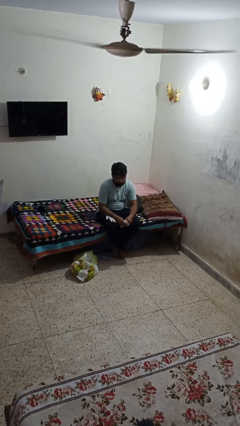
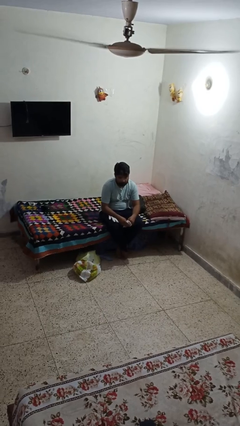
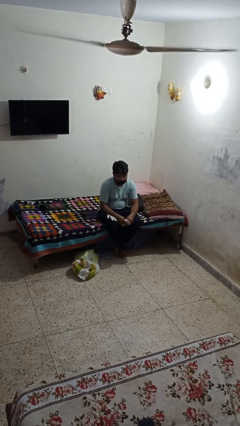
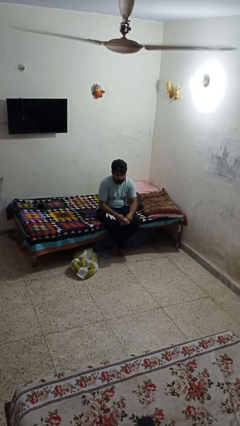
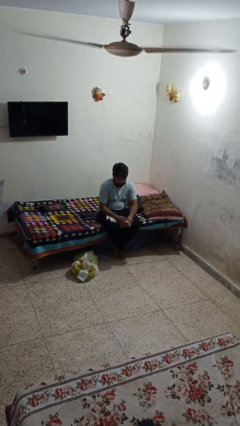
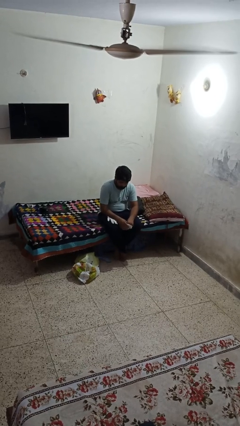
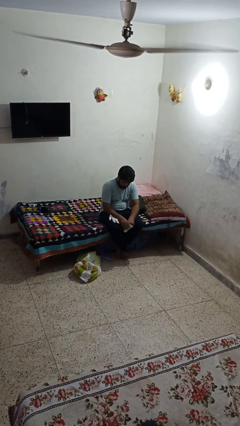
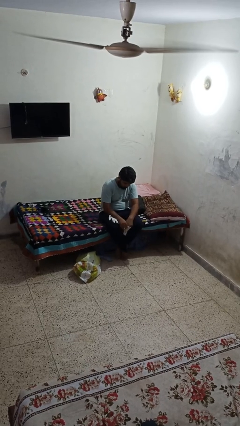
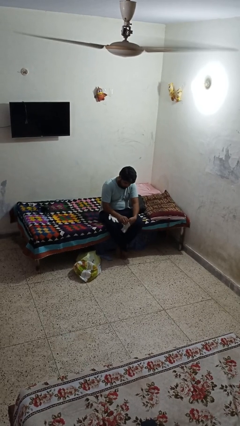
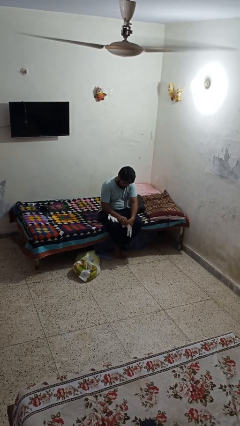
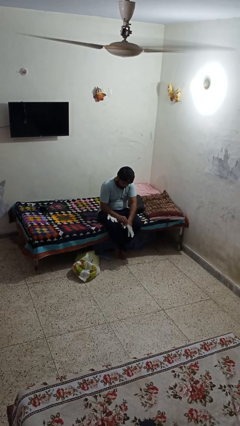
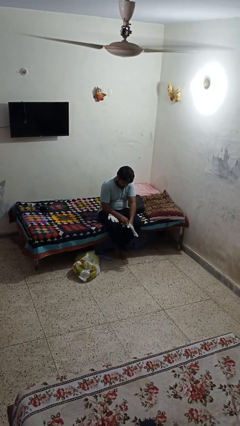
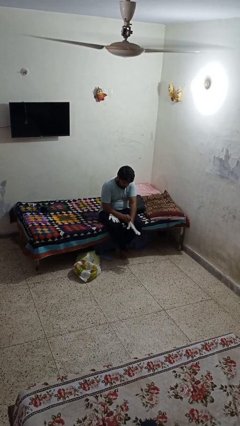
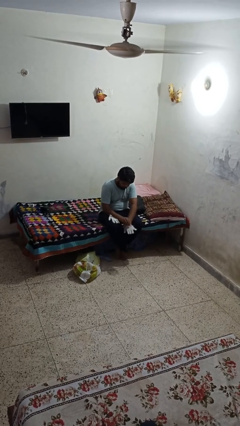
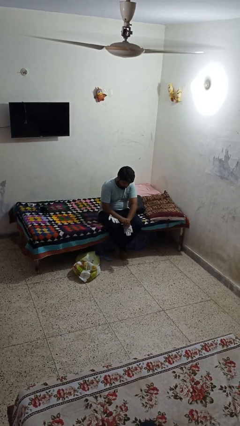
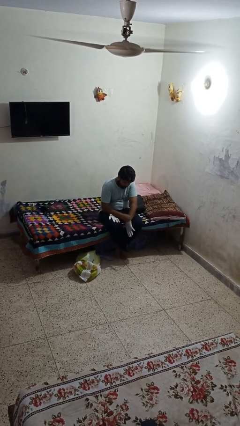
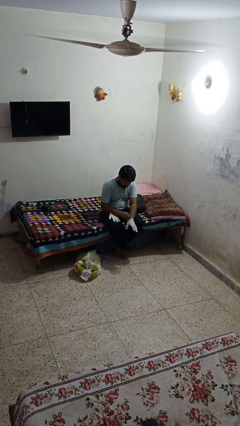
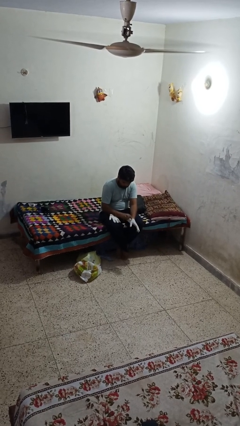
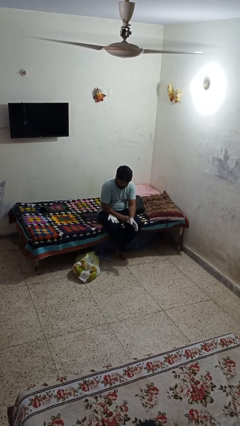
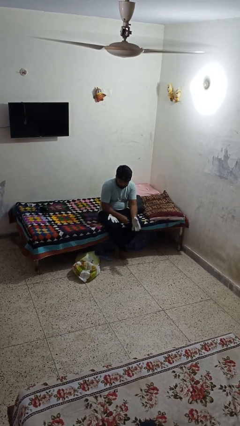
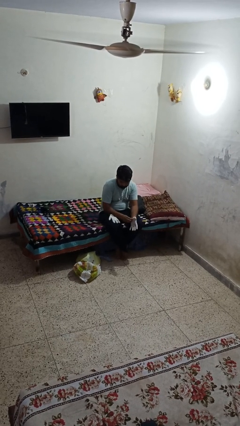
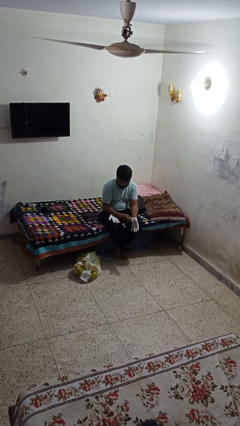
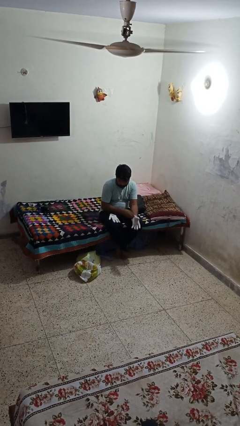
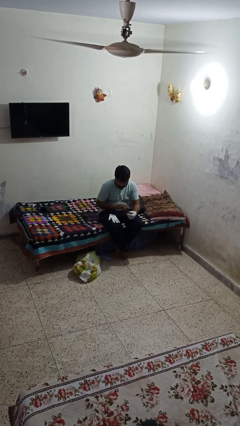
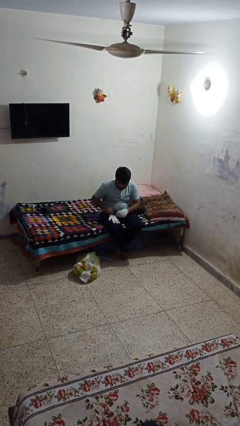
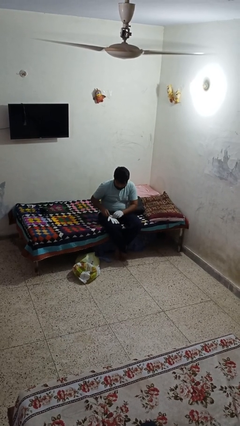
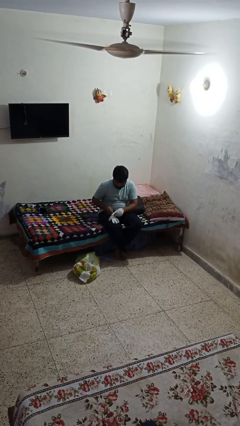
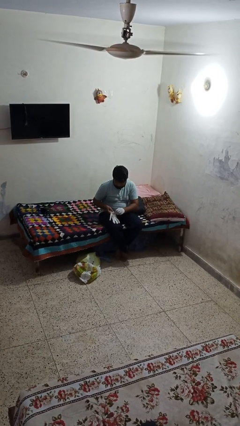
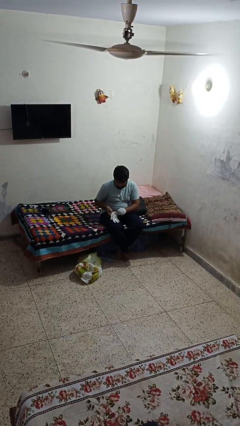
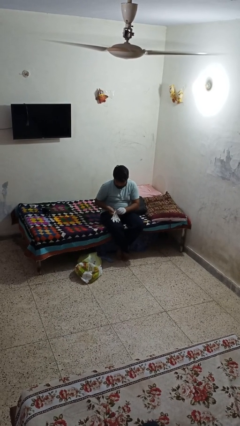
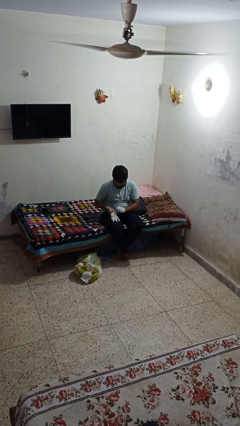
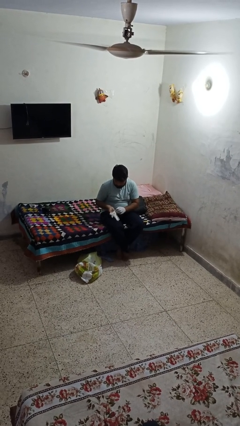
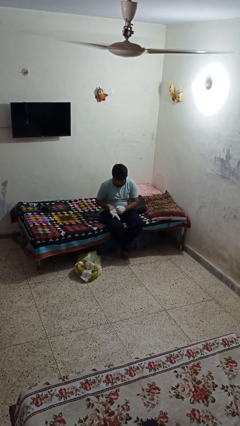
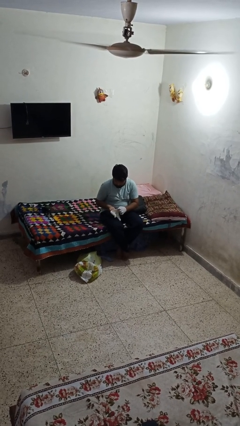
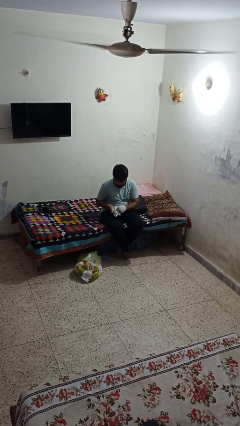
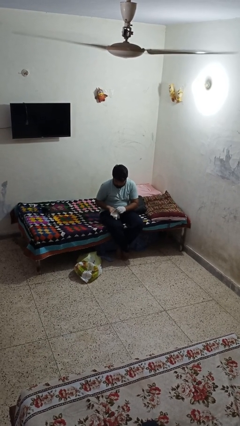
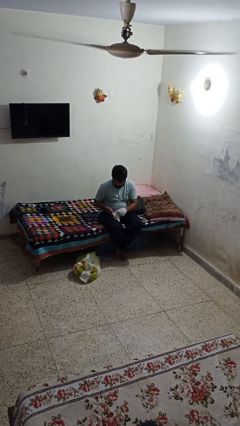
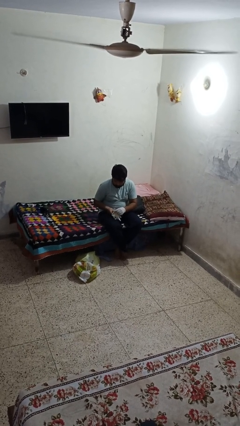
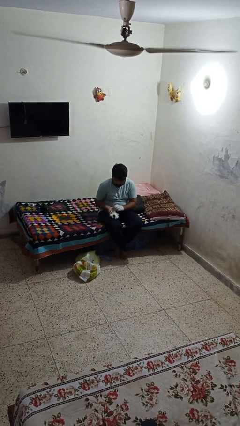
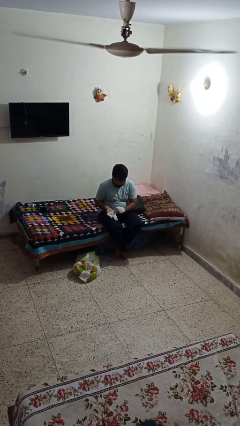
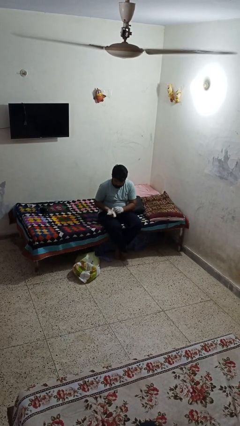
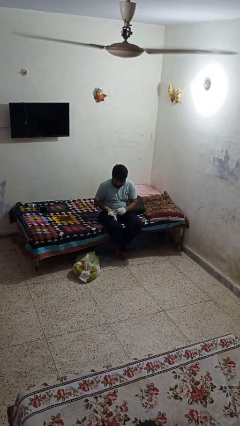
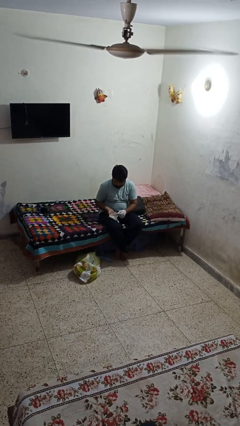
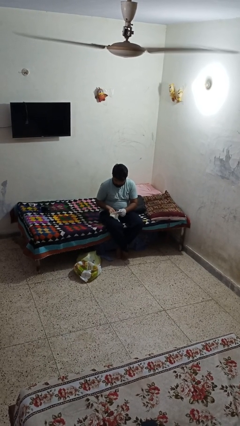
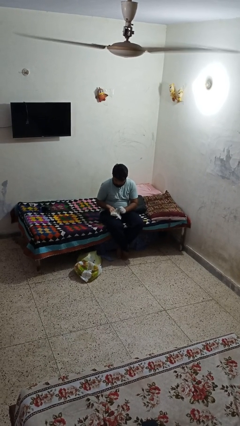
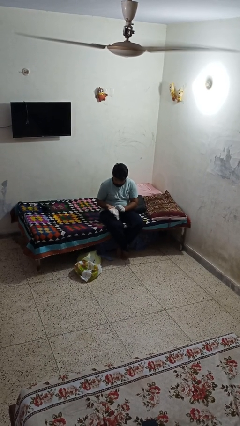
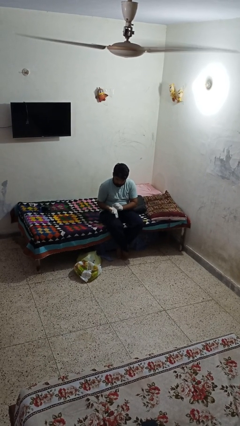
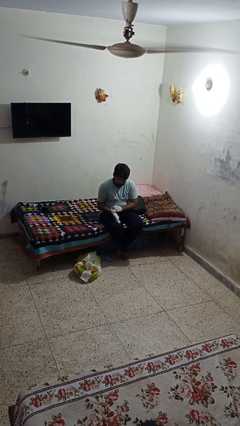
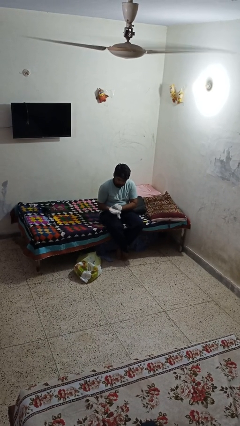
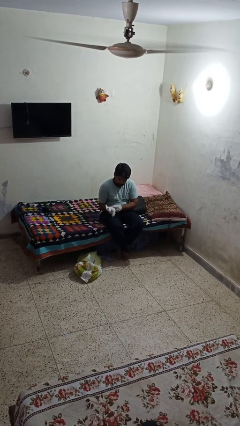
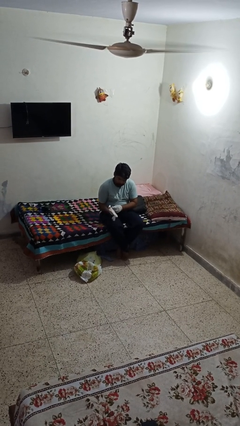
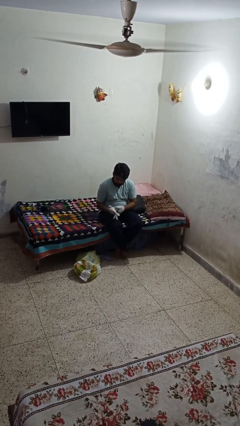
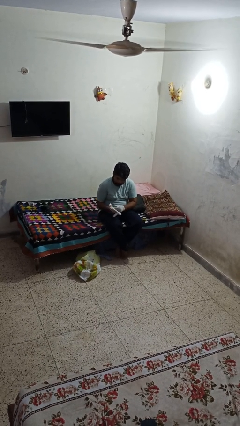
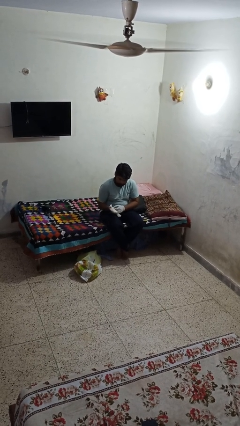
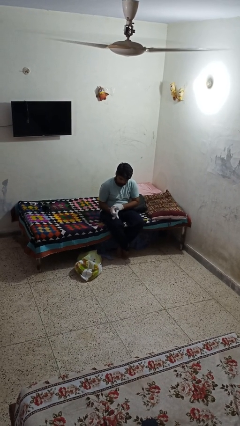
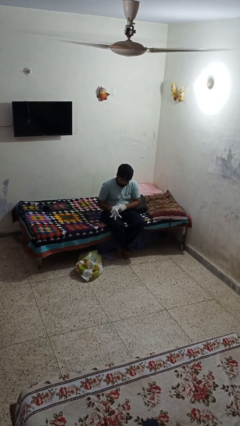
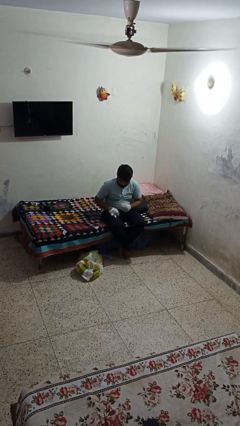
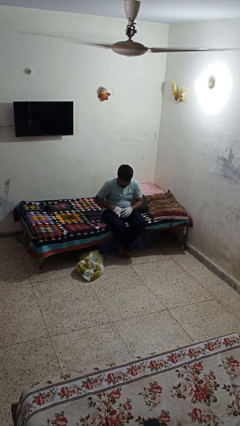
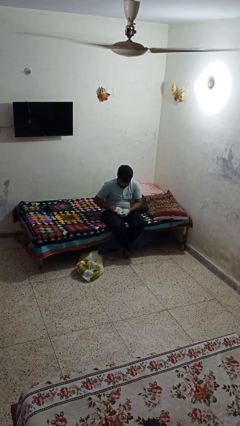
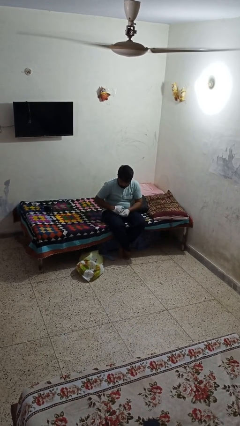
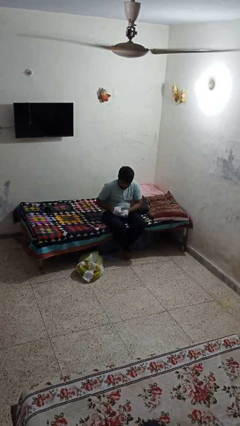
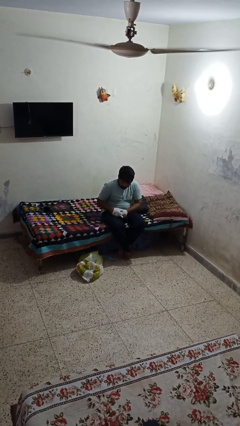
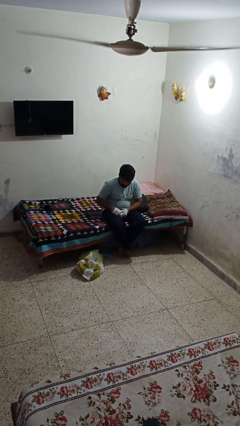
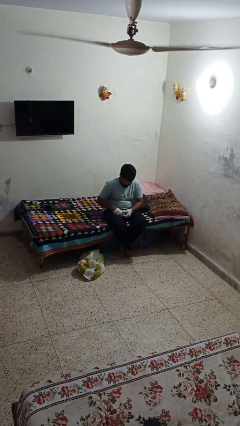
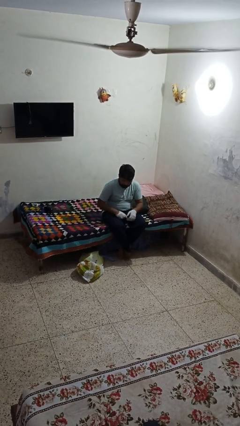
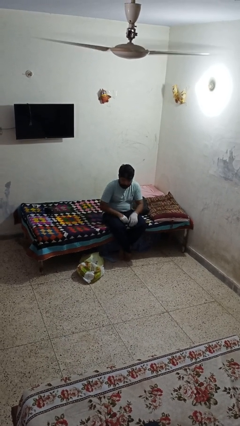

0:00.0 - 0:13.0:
person puts on gloves

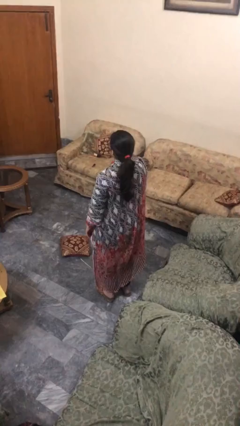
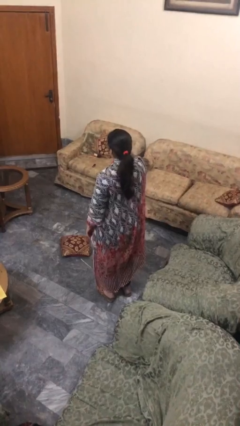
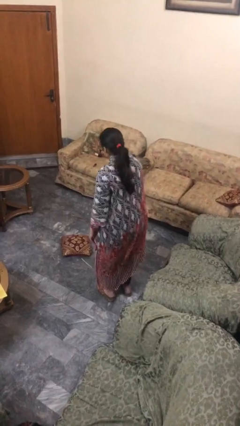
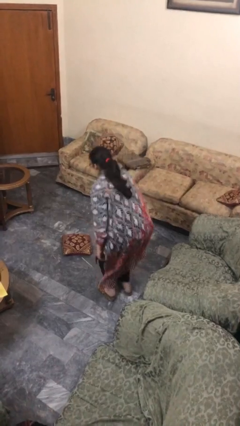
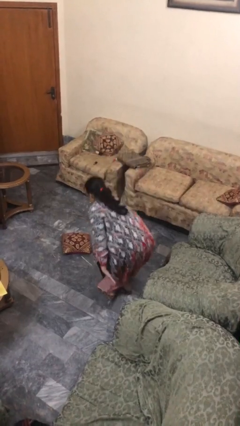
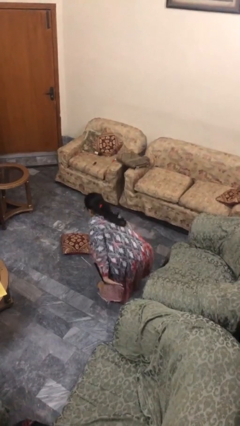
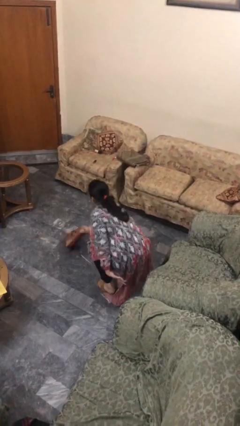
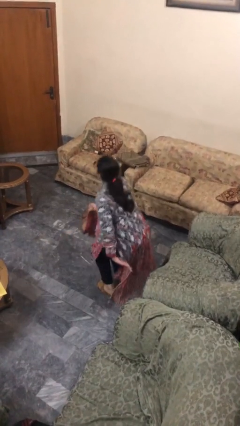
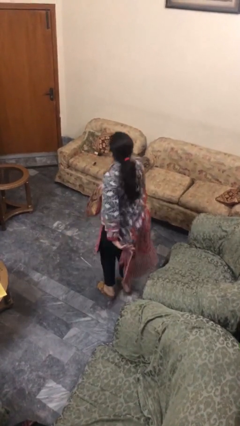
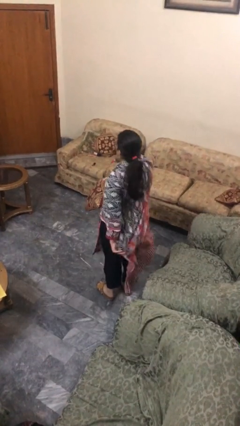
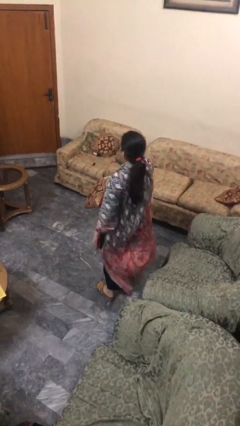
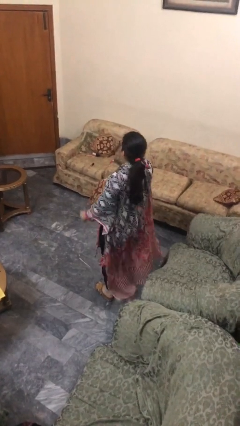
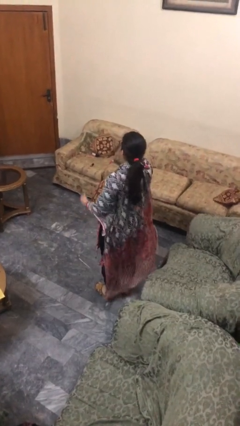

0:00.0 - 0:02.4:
person picks up object from floor

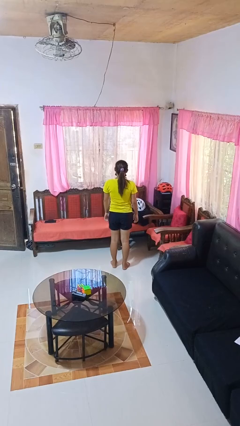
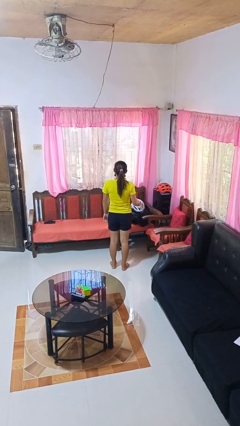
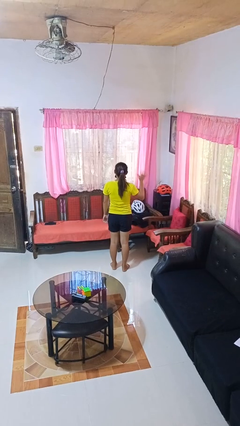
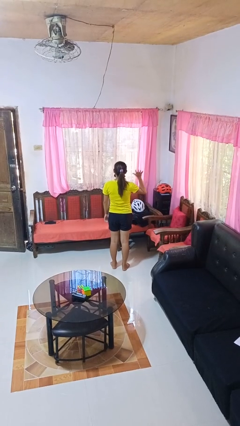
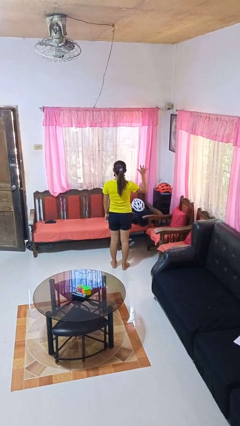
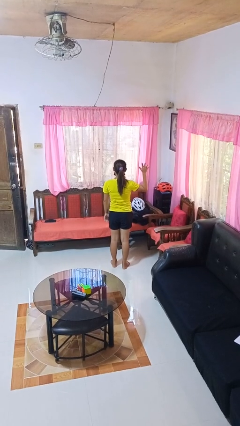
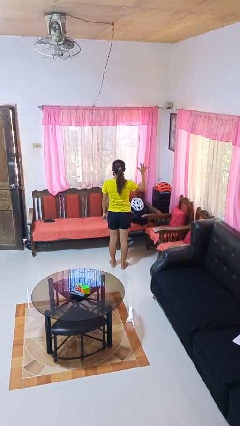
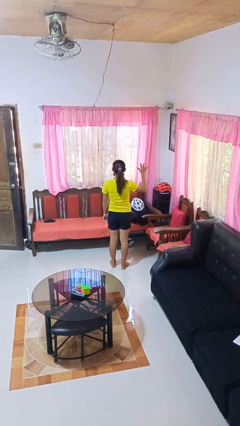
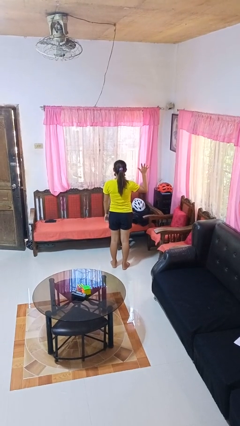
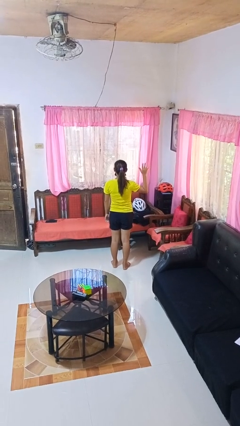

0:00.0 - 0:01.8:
person gestures number five

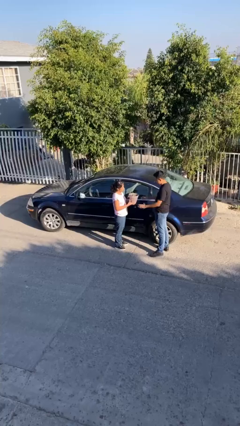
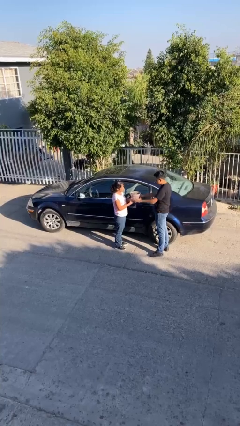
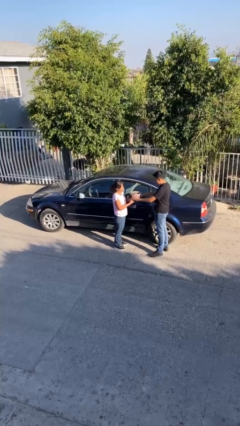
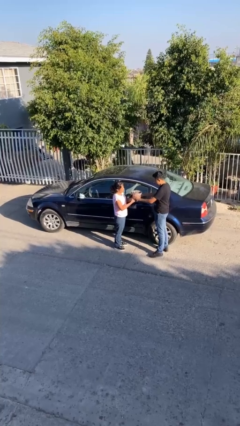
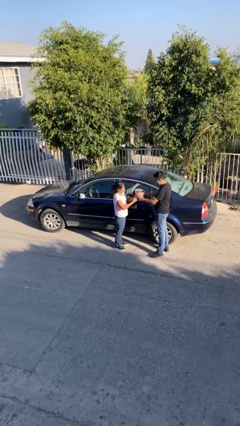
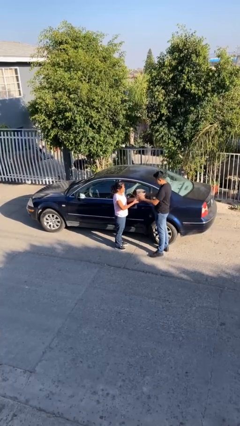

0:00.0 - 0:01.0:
person transfers object to person
